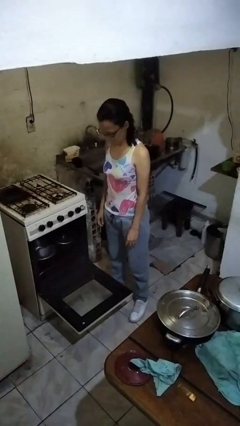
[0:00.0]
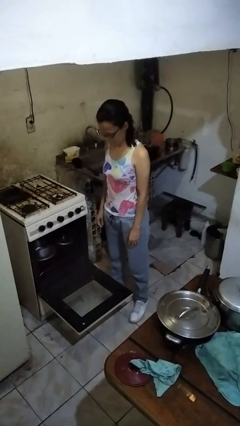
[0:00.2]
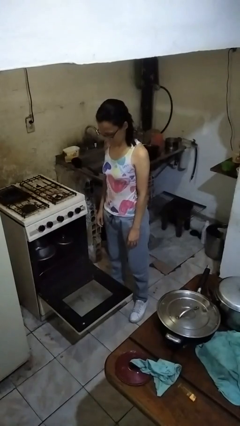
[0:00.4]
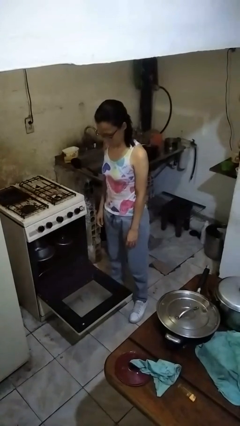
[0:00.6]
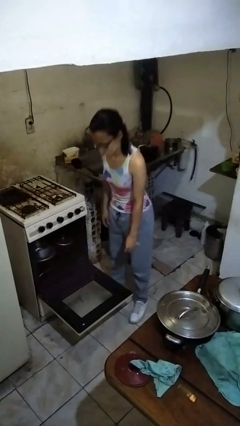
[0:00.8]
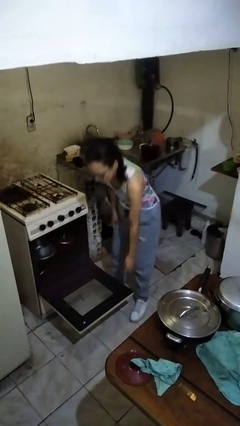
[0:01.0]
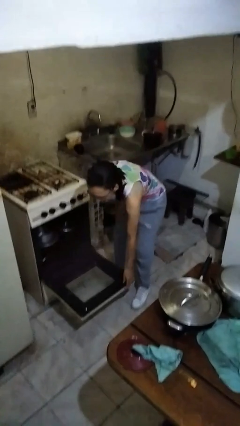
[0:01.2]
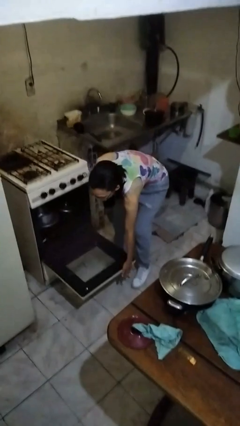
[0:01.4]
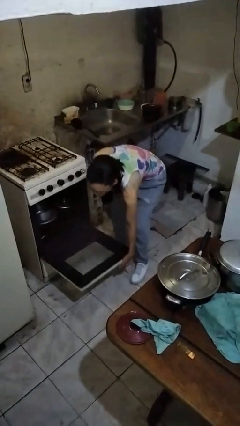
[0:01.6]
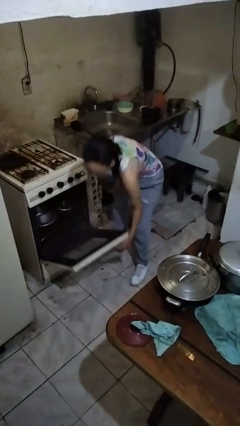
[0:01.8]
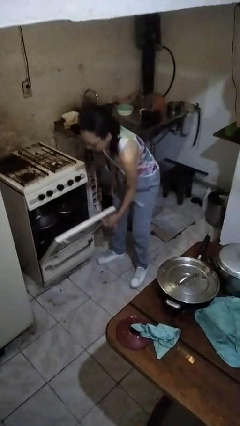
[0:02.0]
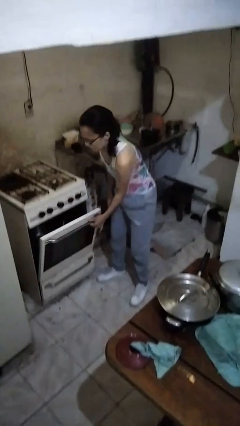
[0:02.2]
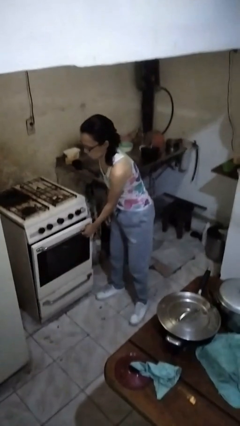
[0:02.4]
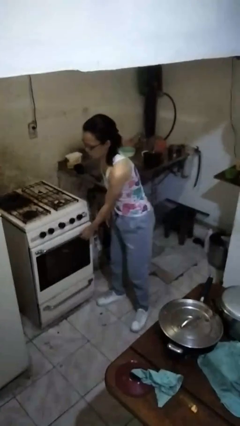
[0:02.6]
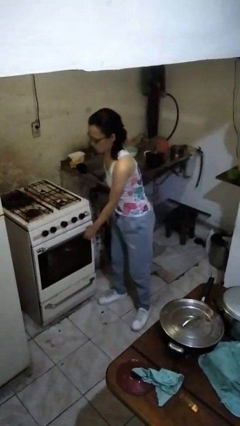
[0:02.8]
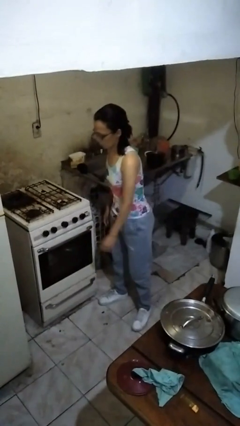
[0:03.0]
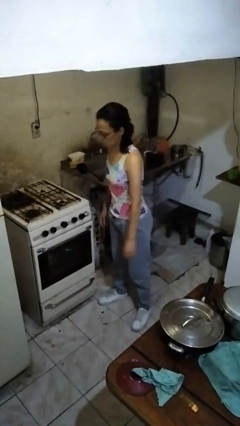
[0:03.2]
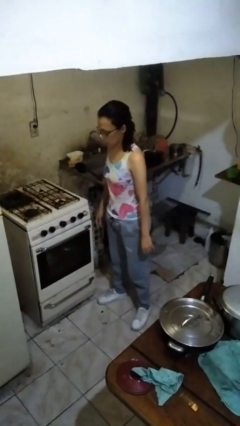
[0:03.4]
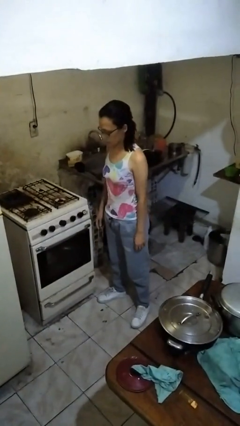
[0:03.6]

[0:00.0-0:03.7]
person closes oven door

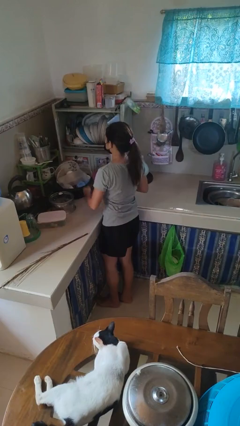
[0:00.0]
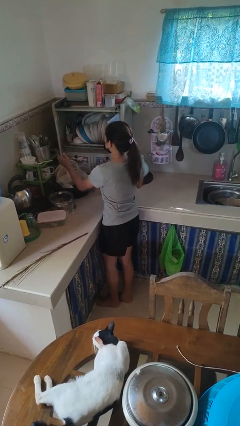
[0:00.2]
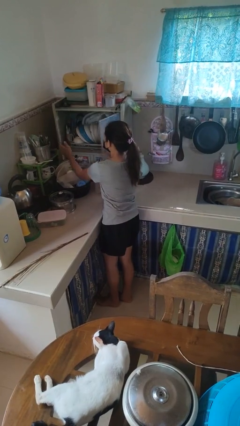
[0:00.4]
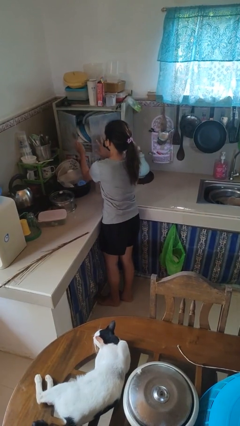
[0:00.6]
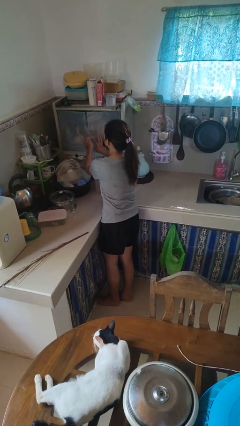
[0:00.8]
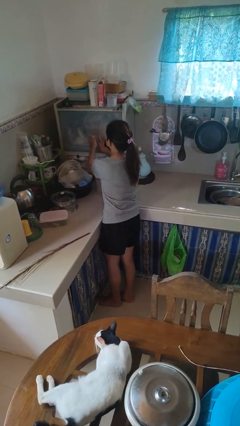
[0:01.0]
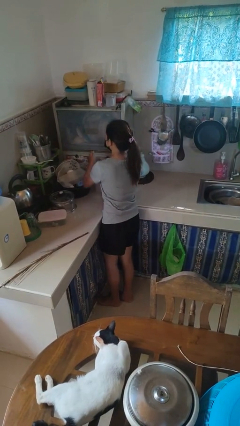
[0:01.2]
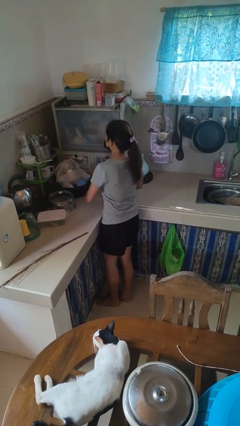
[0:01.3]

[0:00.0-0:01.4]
person closes kitchen drawer

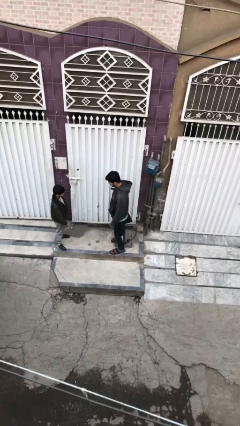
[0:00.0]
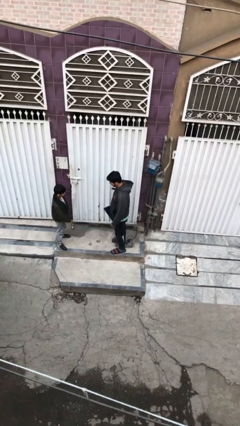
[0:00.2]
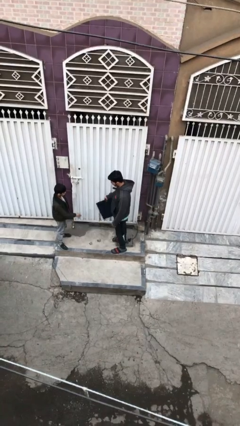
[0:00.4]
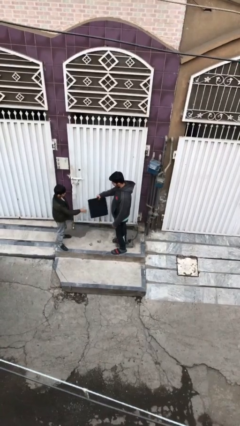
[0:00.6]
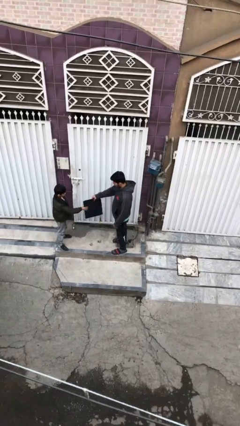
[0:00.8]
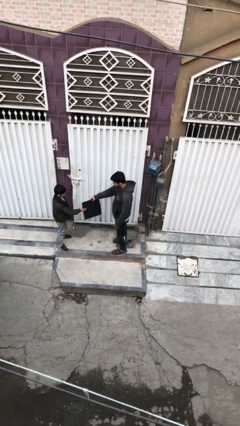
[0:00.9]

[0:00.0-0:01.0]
person transfers object to person

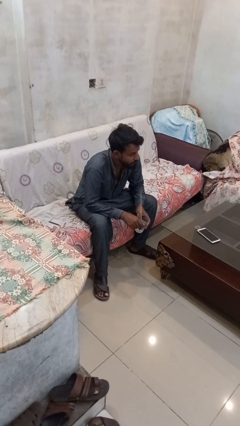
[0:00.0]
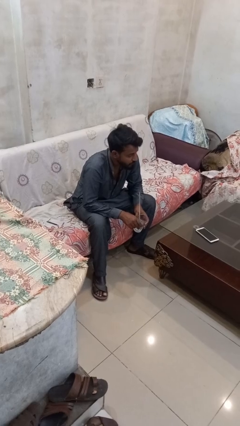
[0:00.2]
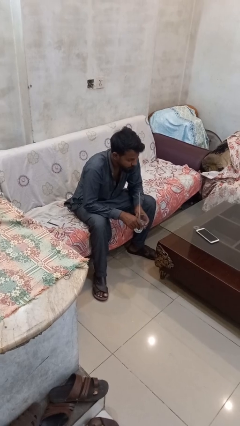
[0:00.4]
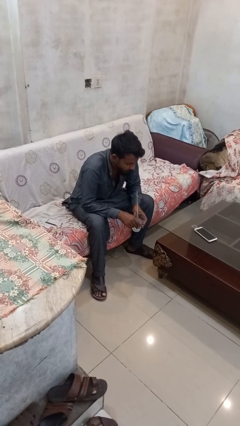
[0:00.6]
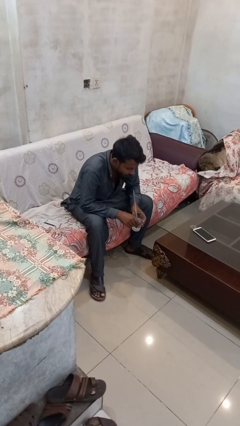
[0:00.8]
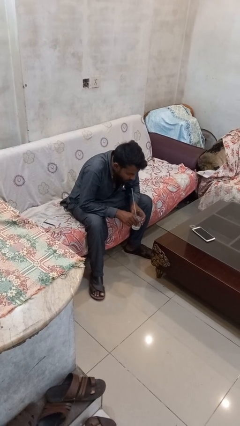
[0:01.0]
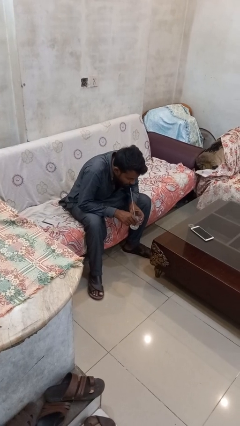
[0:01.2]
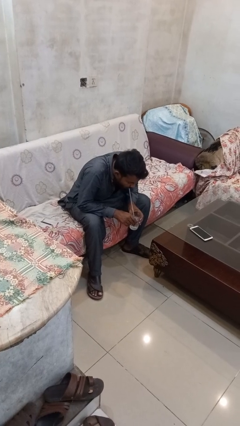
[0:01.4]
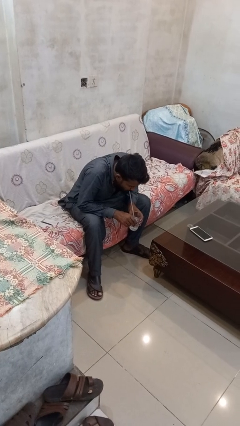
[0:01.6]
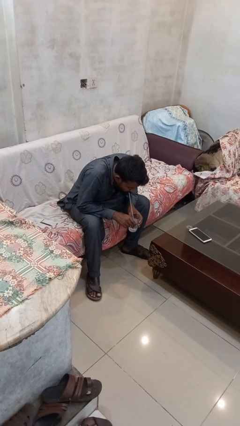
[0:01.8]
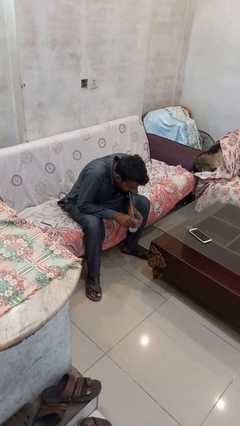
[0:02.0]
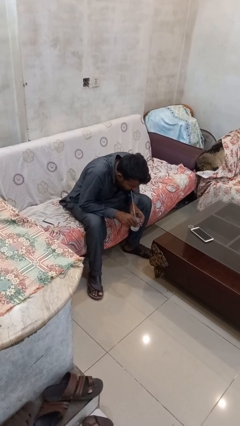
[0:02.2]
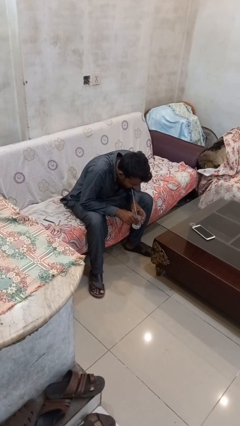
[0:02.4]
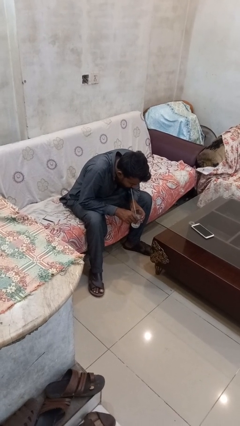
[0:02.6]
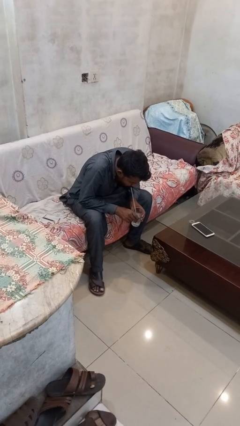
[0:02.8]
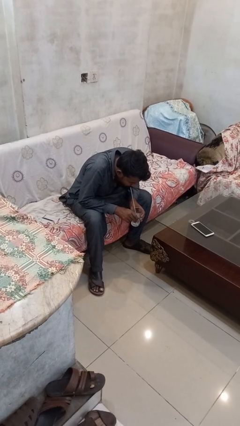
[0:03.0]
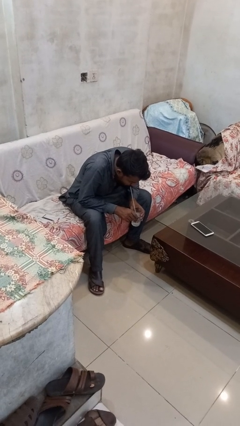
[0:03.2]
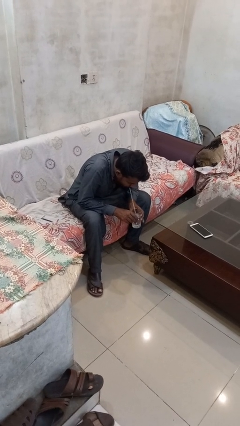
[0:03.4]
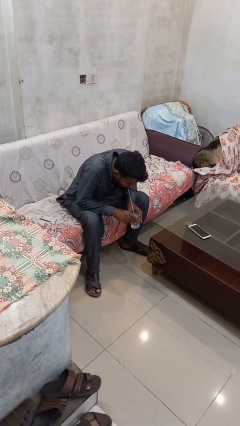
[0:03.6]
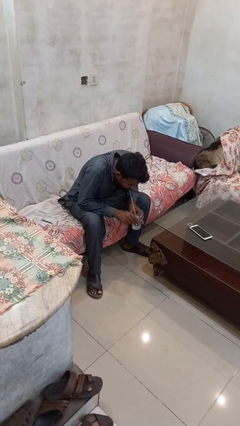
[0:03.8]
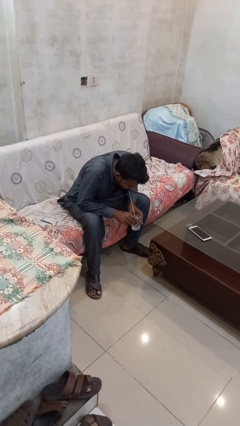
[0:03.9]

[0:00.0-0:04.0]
person drinks from straw

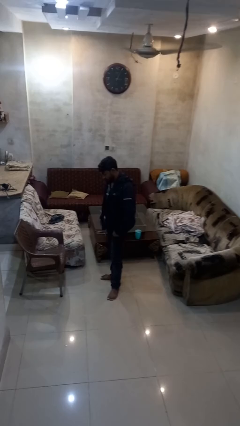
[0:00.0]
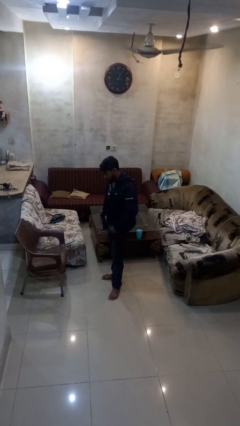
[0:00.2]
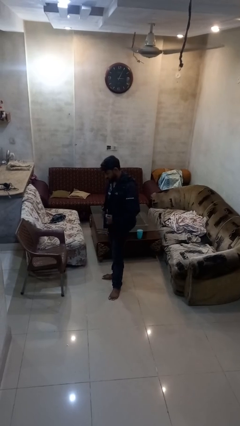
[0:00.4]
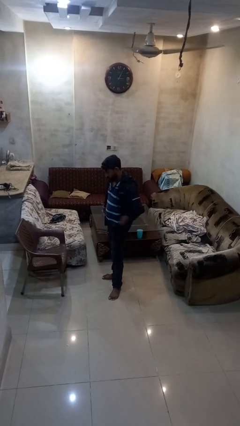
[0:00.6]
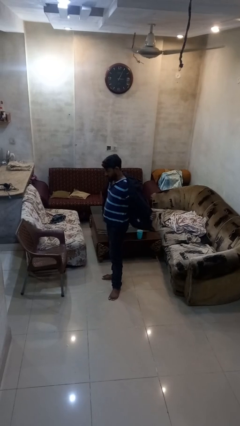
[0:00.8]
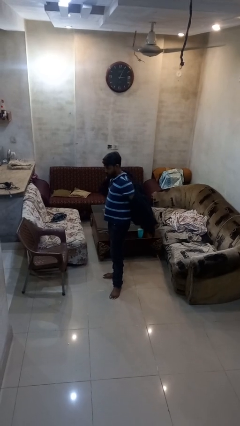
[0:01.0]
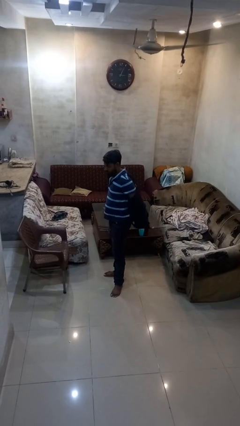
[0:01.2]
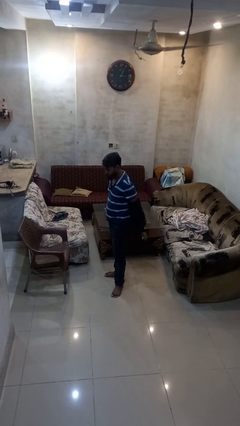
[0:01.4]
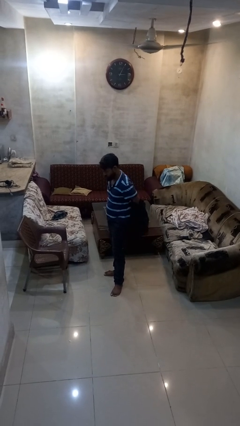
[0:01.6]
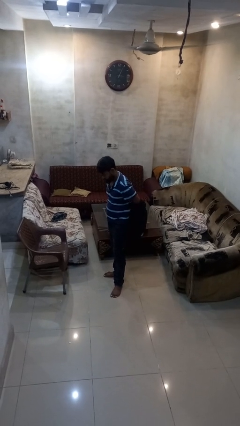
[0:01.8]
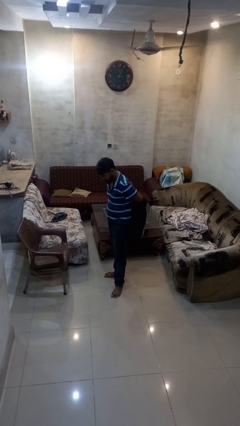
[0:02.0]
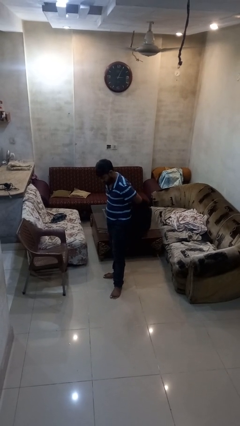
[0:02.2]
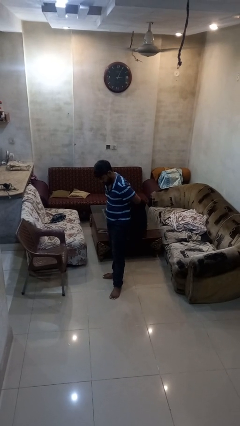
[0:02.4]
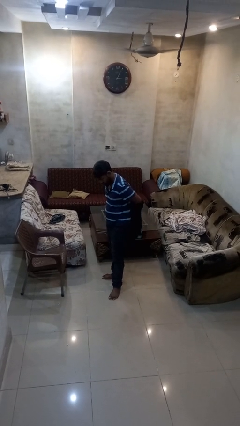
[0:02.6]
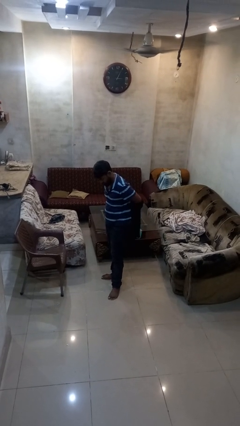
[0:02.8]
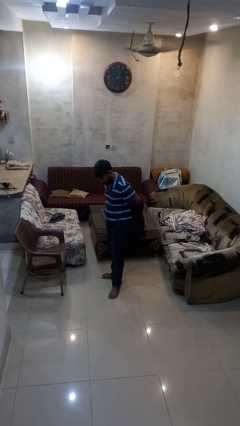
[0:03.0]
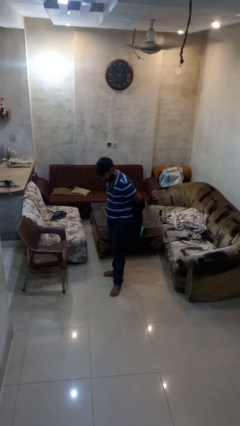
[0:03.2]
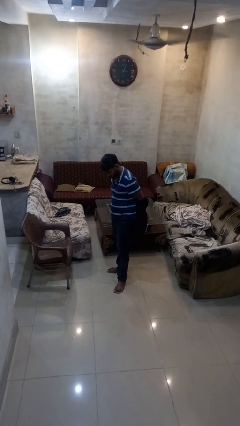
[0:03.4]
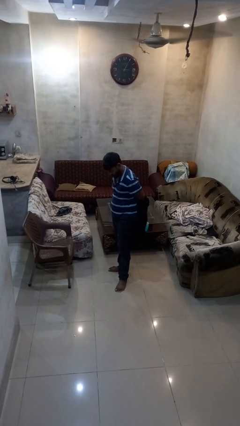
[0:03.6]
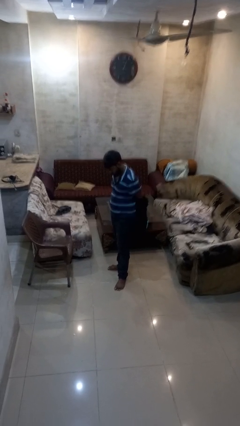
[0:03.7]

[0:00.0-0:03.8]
person takes off jacket

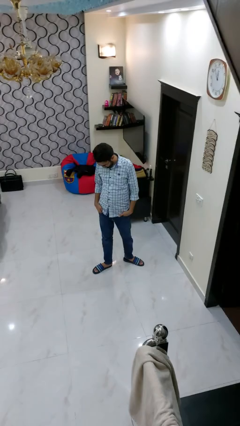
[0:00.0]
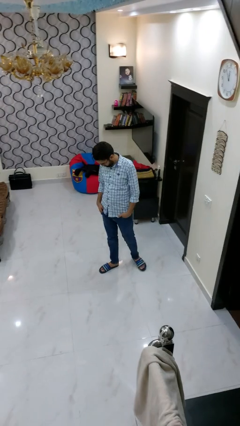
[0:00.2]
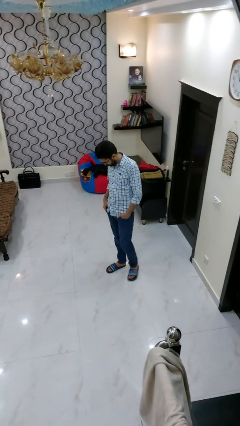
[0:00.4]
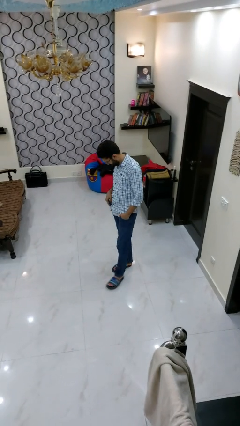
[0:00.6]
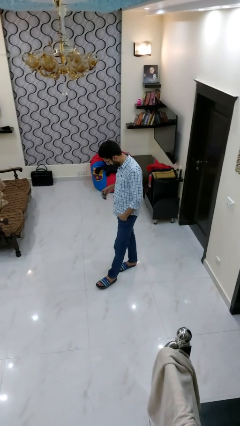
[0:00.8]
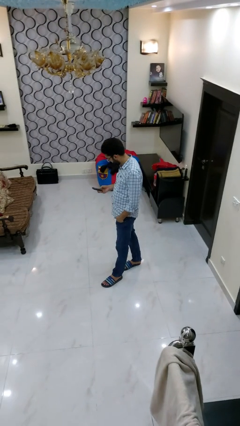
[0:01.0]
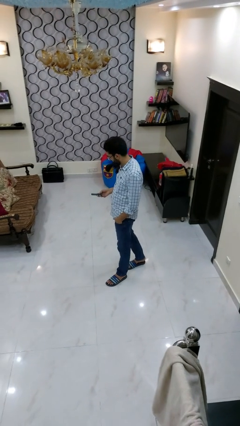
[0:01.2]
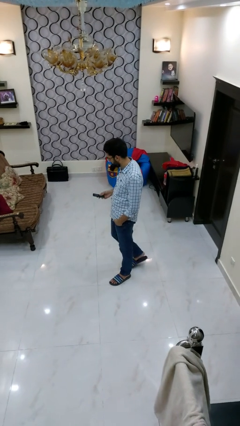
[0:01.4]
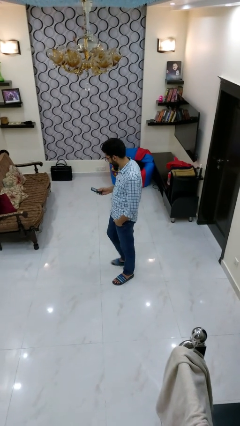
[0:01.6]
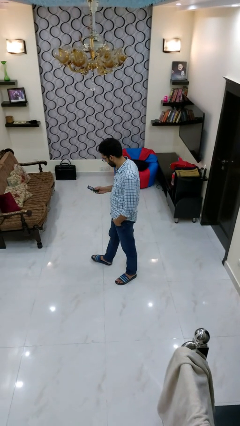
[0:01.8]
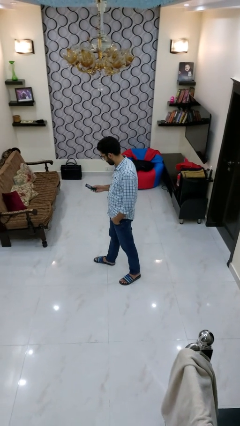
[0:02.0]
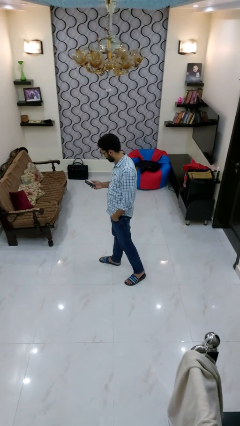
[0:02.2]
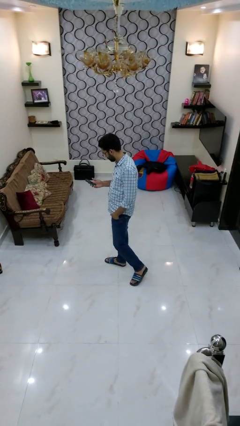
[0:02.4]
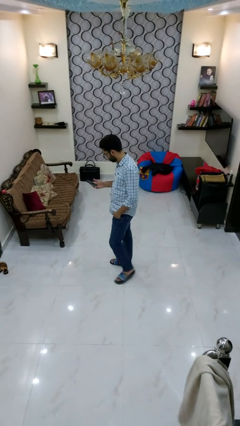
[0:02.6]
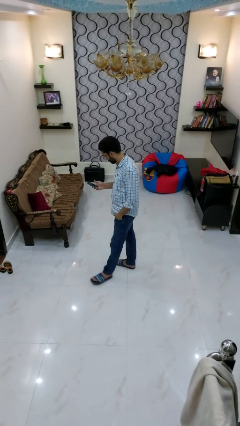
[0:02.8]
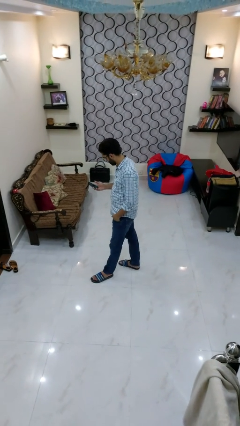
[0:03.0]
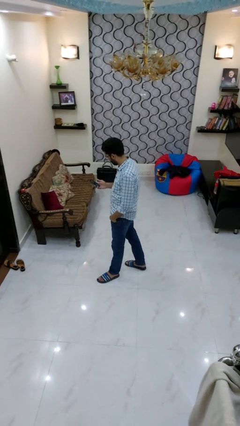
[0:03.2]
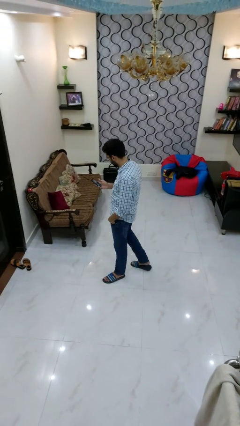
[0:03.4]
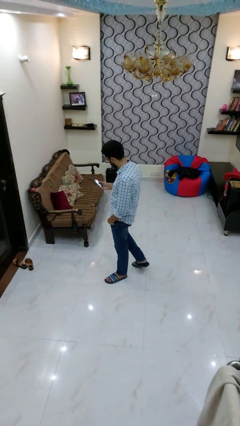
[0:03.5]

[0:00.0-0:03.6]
person takes phone from pocket
